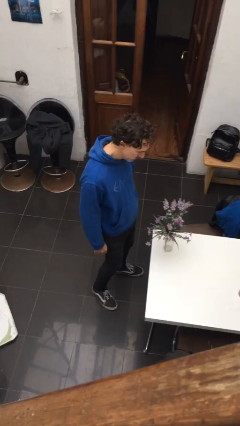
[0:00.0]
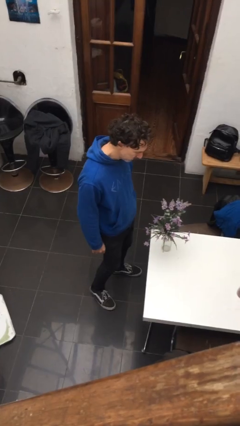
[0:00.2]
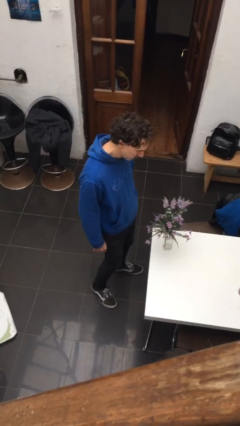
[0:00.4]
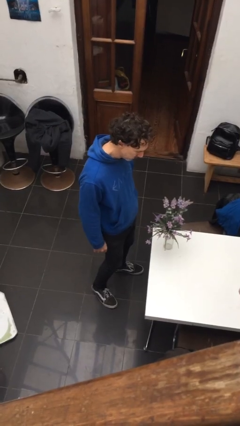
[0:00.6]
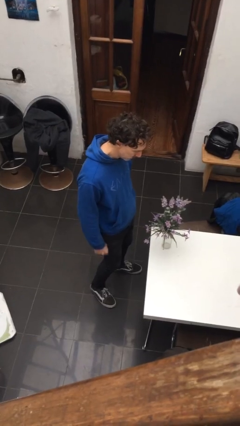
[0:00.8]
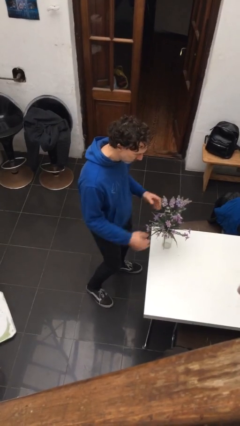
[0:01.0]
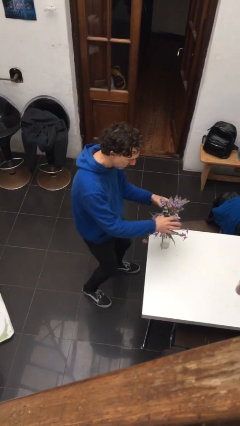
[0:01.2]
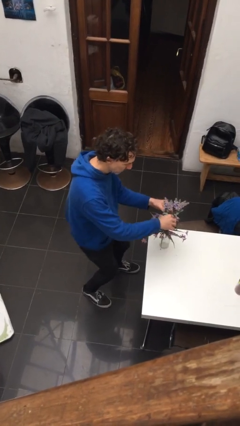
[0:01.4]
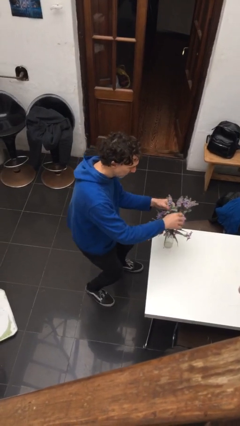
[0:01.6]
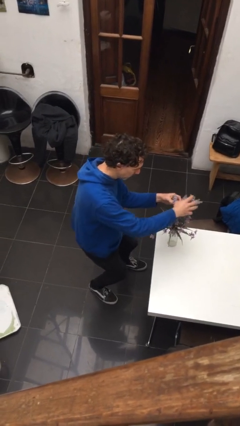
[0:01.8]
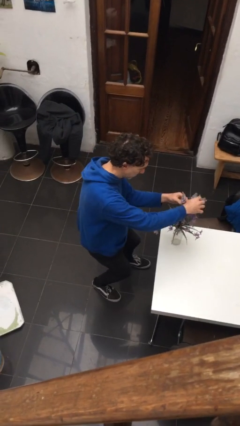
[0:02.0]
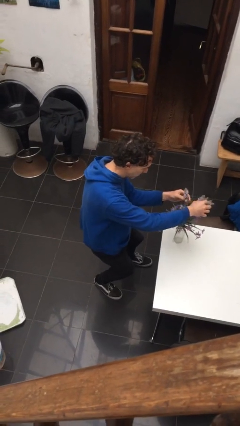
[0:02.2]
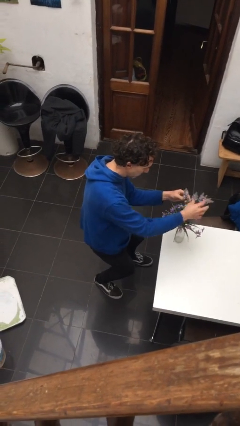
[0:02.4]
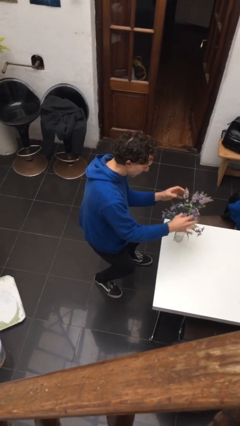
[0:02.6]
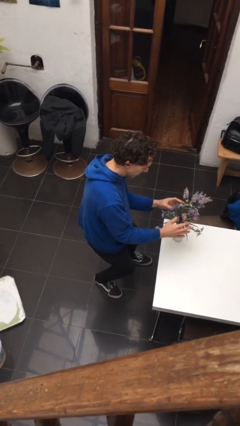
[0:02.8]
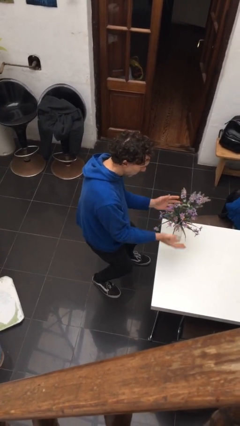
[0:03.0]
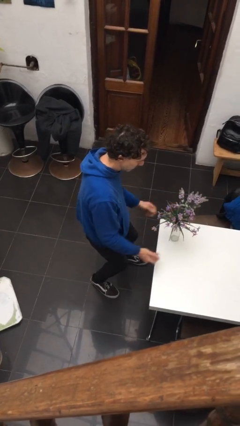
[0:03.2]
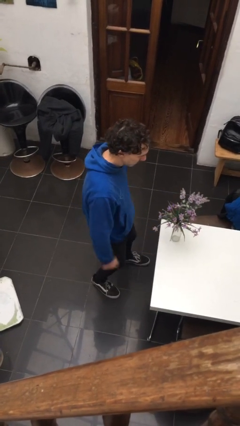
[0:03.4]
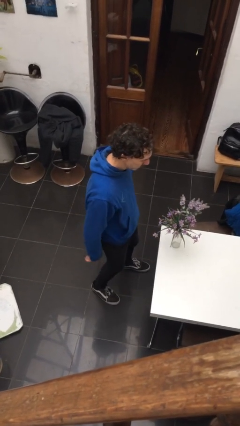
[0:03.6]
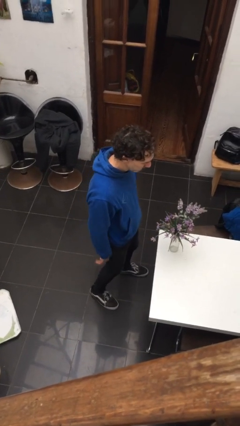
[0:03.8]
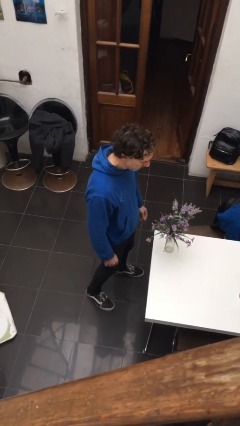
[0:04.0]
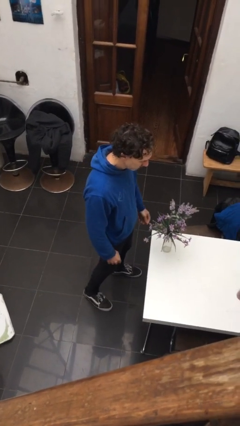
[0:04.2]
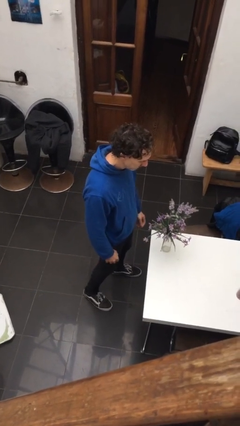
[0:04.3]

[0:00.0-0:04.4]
person arranges flowers in vase

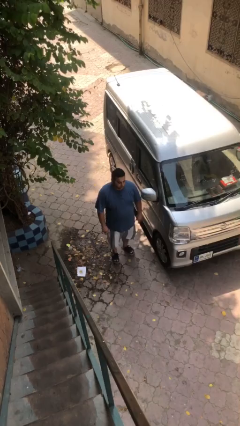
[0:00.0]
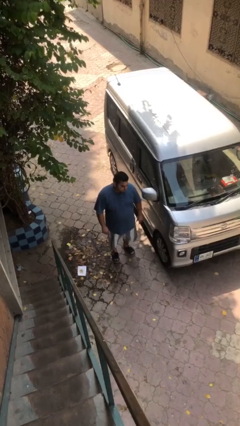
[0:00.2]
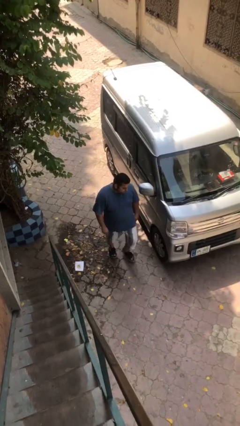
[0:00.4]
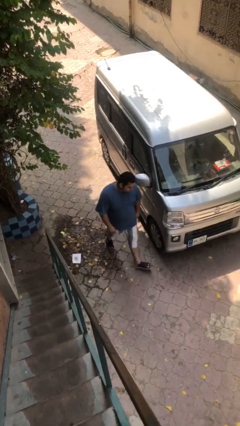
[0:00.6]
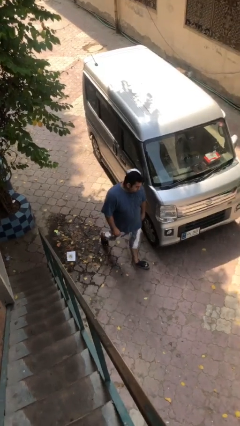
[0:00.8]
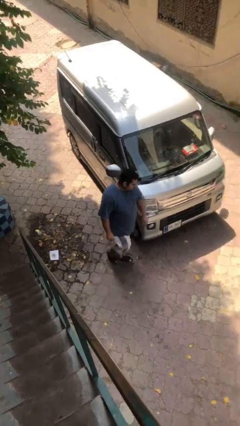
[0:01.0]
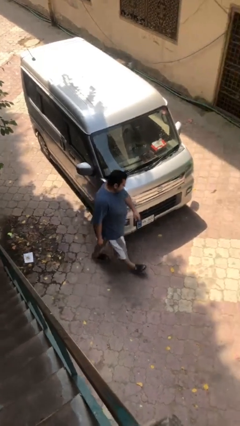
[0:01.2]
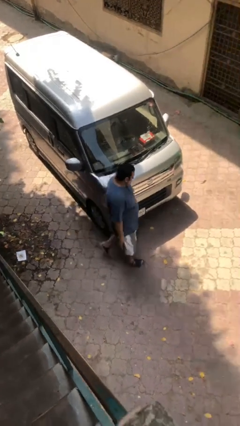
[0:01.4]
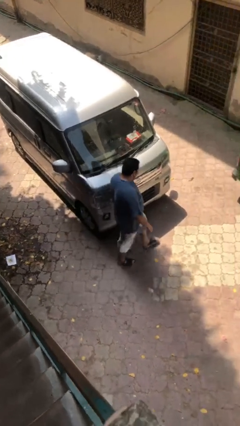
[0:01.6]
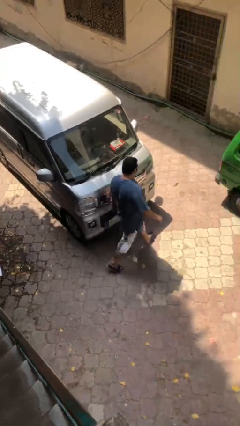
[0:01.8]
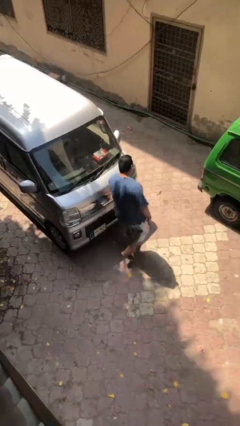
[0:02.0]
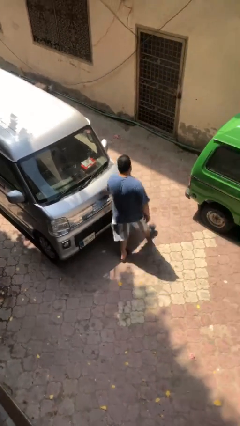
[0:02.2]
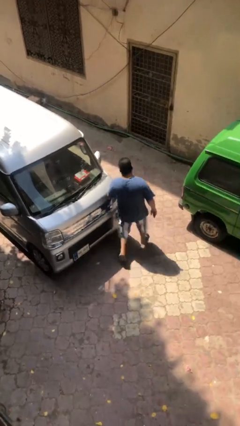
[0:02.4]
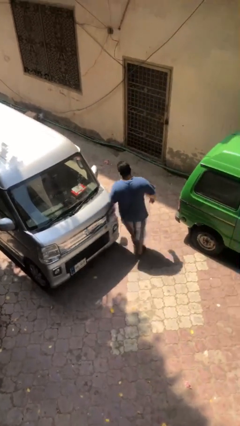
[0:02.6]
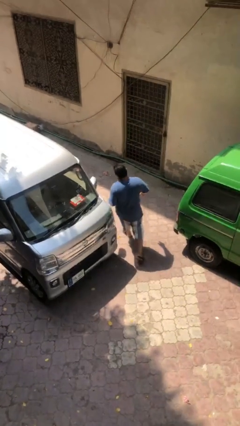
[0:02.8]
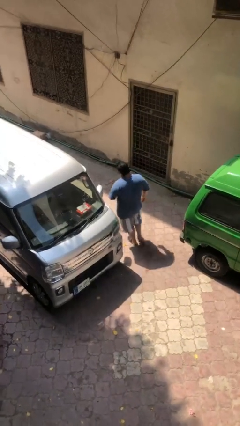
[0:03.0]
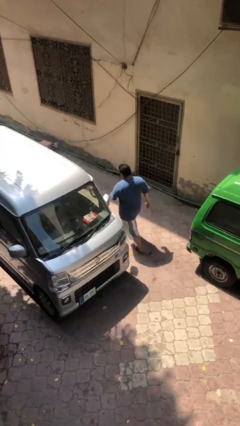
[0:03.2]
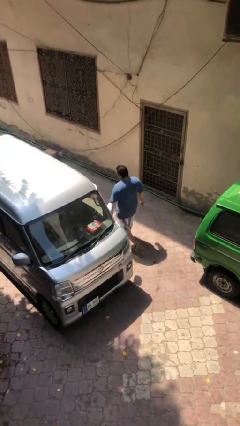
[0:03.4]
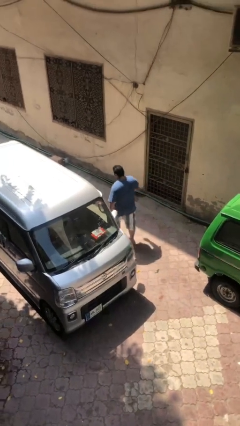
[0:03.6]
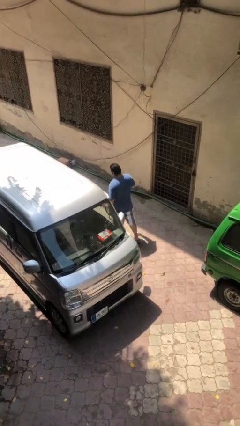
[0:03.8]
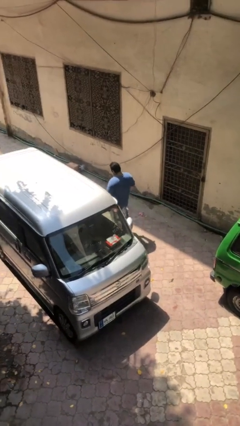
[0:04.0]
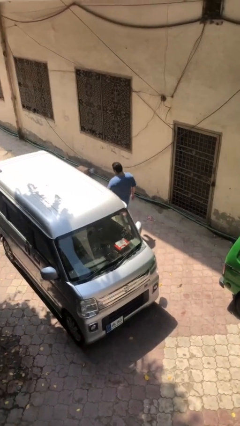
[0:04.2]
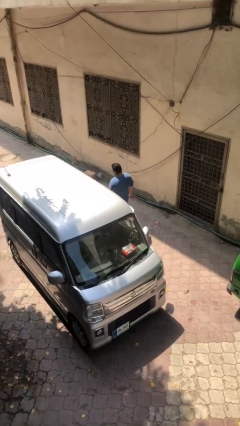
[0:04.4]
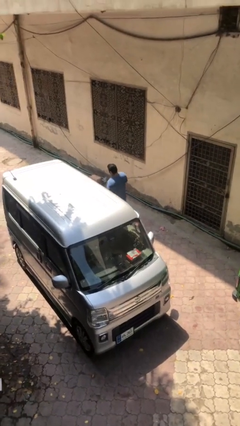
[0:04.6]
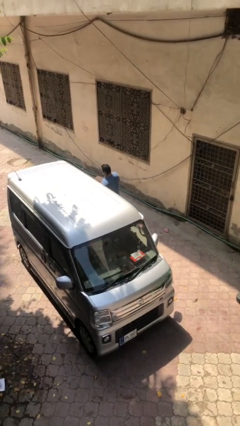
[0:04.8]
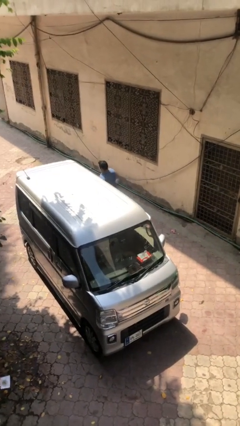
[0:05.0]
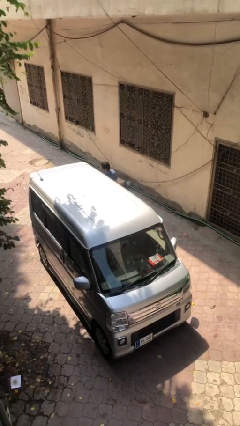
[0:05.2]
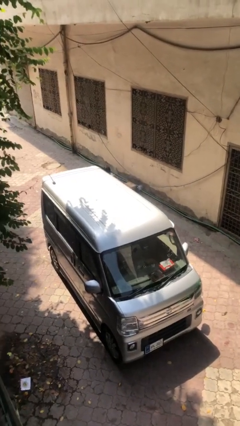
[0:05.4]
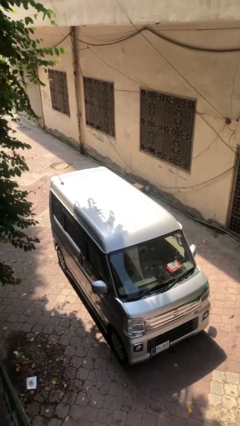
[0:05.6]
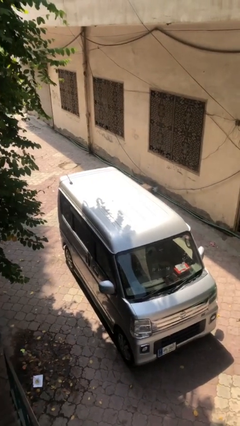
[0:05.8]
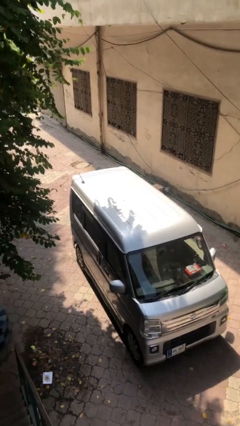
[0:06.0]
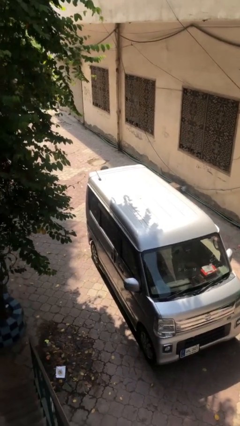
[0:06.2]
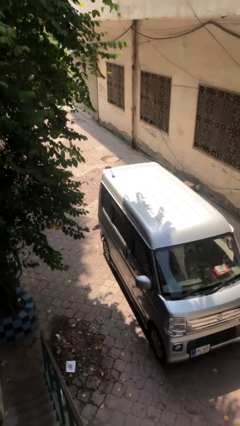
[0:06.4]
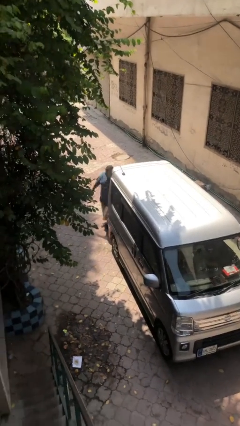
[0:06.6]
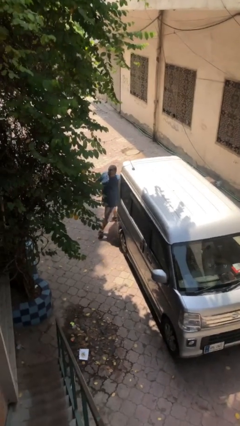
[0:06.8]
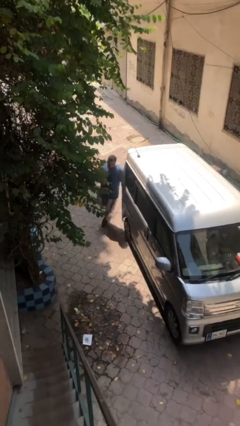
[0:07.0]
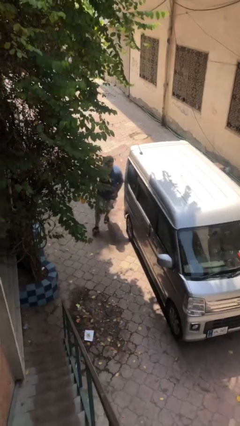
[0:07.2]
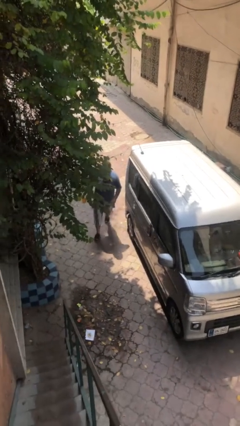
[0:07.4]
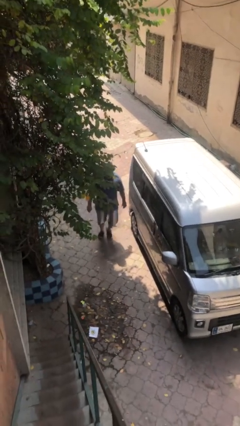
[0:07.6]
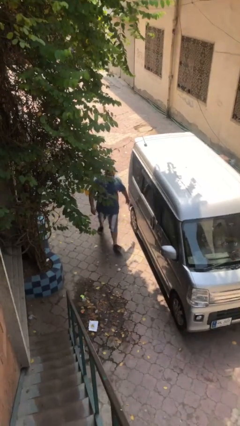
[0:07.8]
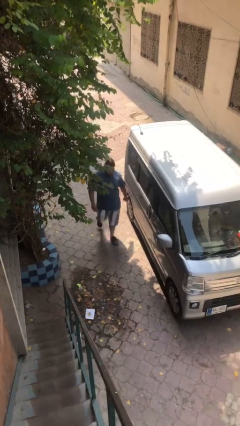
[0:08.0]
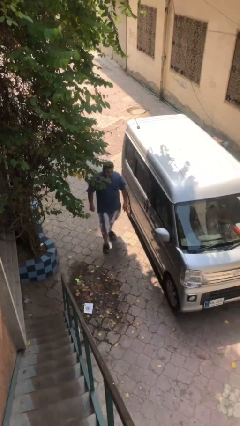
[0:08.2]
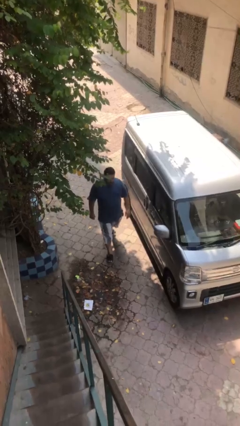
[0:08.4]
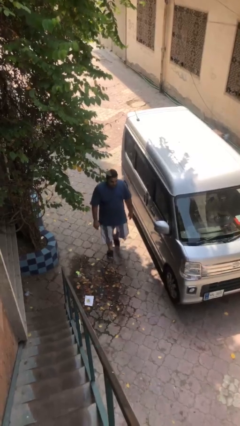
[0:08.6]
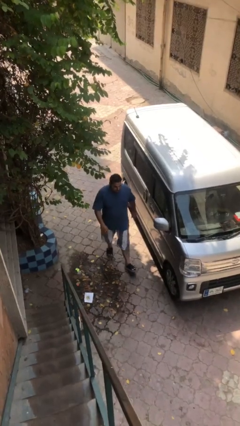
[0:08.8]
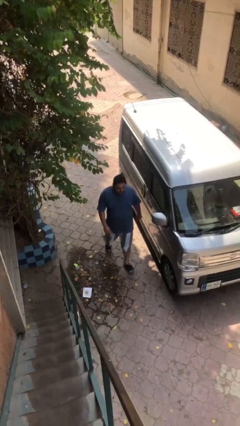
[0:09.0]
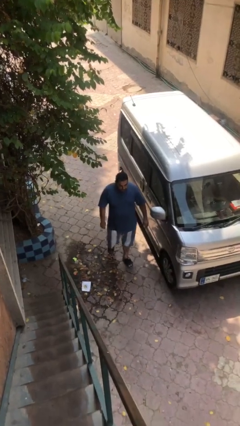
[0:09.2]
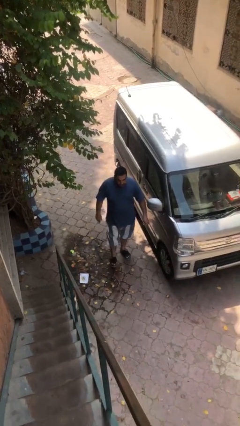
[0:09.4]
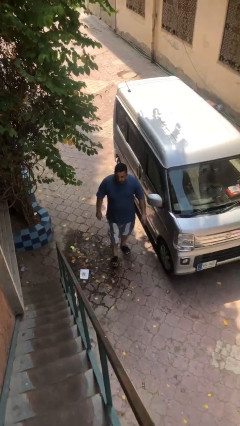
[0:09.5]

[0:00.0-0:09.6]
person walks around car

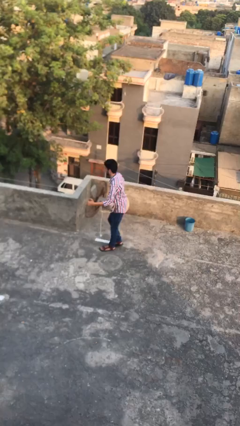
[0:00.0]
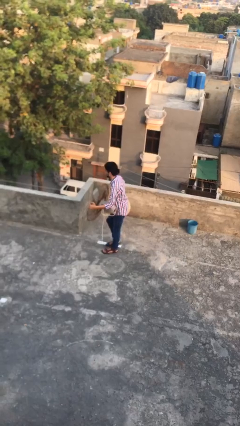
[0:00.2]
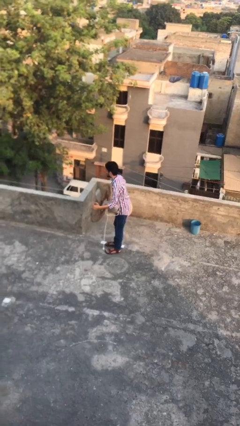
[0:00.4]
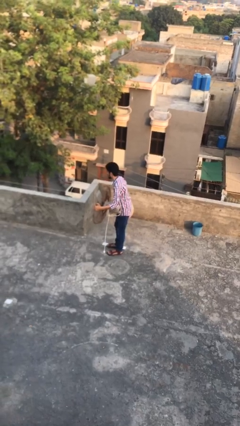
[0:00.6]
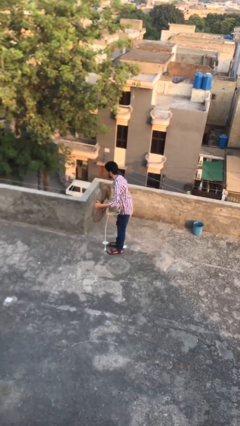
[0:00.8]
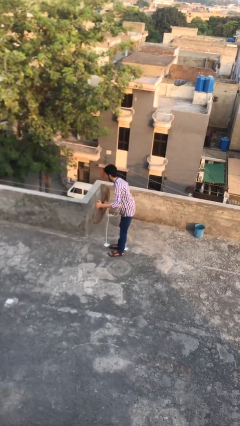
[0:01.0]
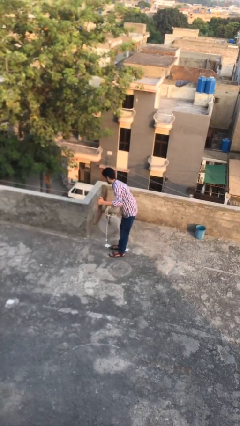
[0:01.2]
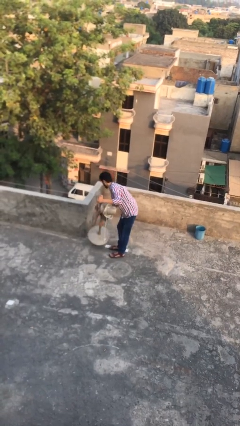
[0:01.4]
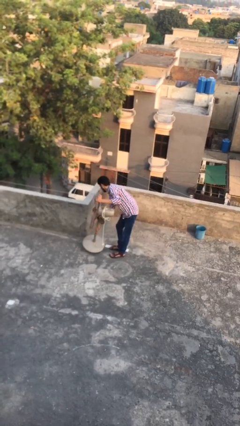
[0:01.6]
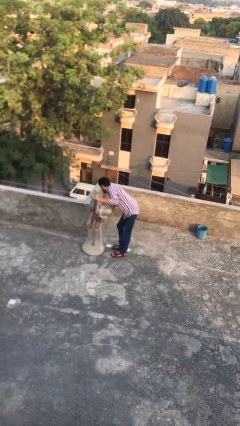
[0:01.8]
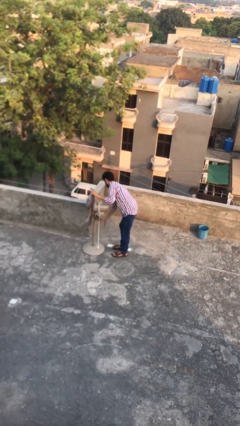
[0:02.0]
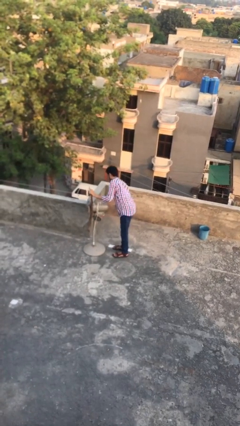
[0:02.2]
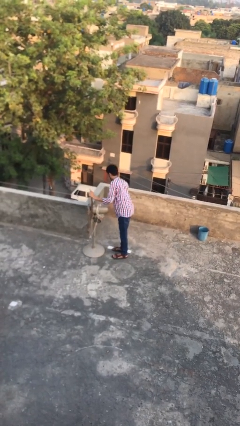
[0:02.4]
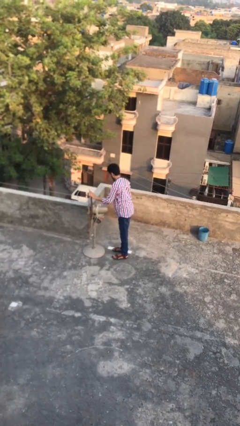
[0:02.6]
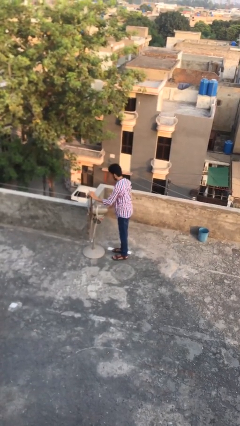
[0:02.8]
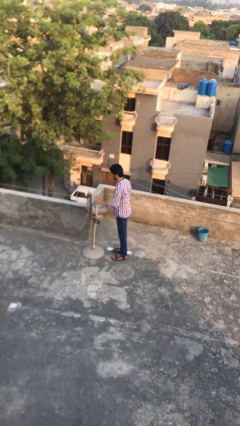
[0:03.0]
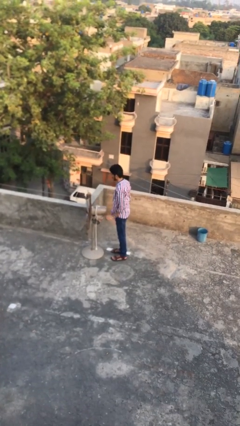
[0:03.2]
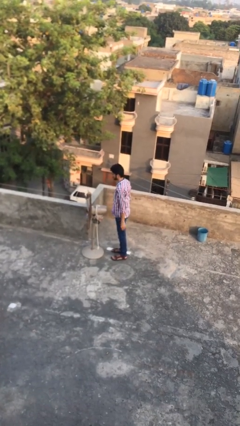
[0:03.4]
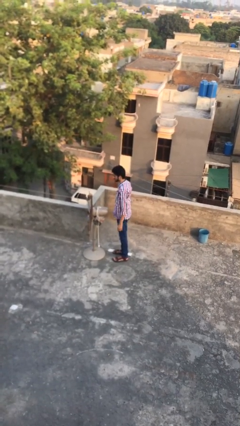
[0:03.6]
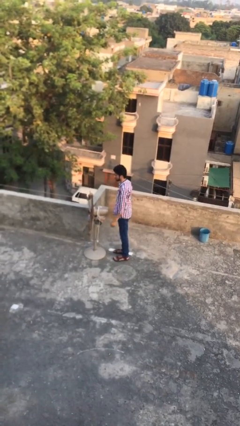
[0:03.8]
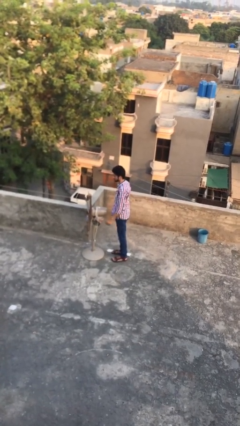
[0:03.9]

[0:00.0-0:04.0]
person puts down object on floor
